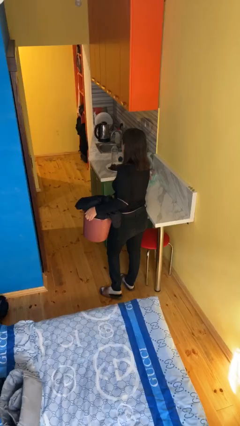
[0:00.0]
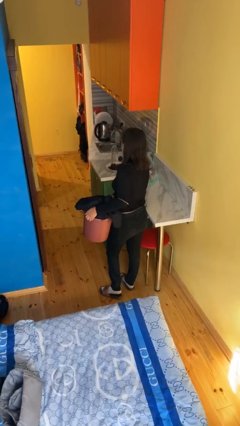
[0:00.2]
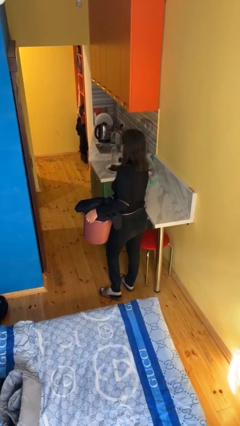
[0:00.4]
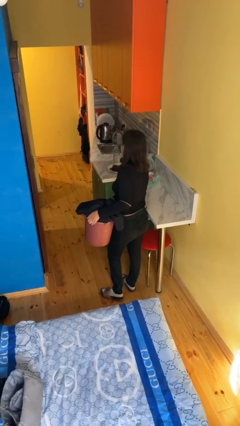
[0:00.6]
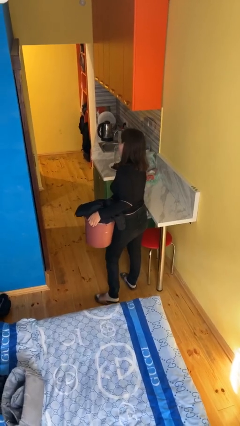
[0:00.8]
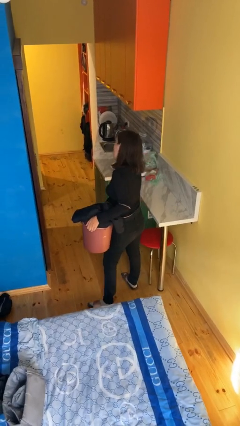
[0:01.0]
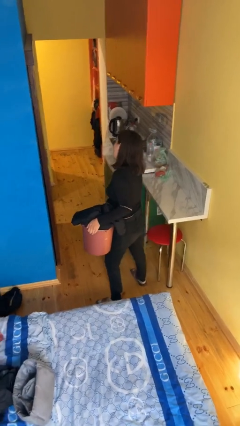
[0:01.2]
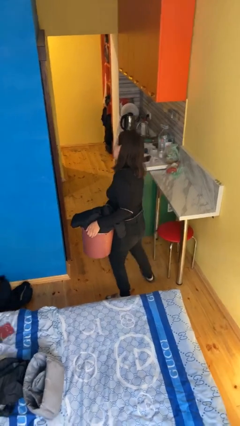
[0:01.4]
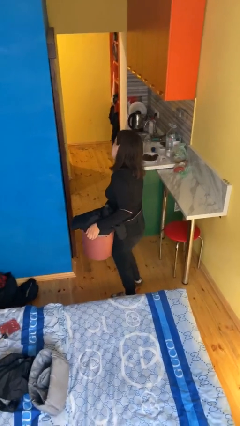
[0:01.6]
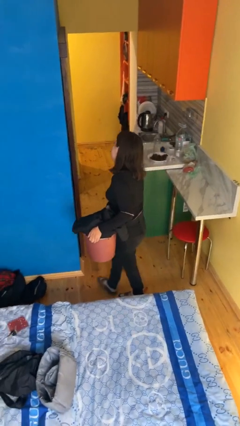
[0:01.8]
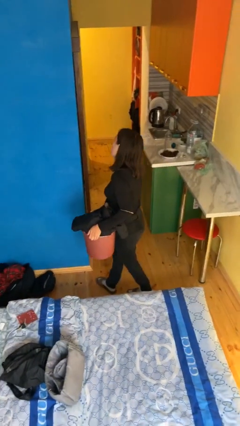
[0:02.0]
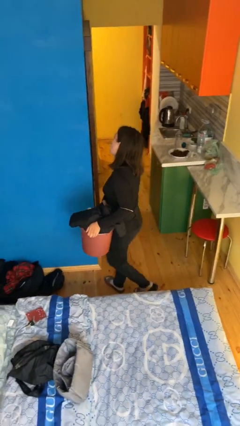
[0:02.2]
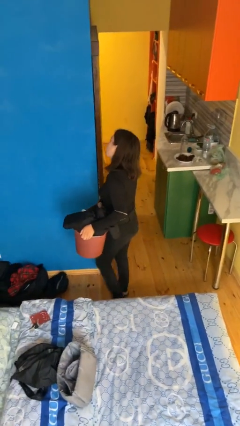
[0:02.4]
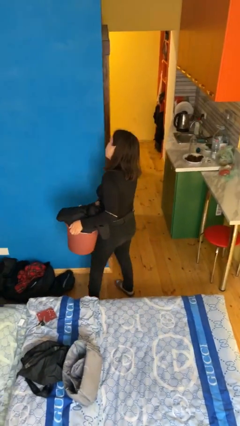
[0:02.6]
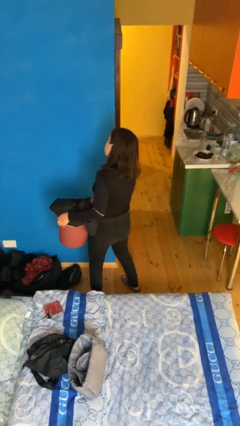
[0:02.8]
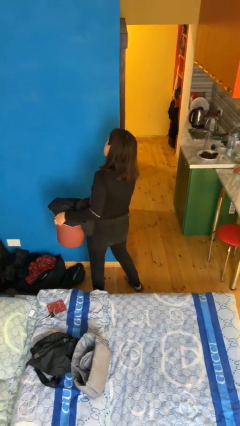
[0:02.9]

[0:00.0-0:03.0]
person carries laundry basket

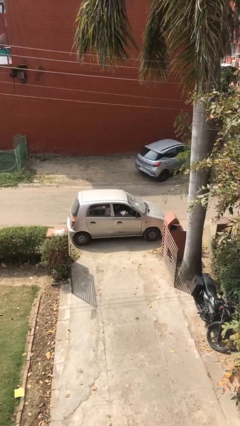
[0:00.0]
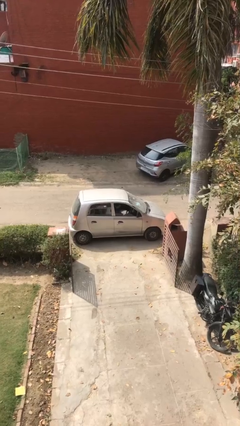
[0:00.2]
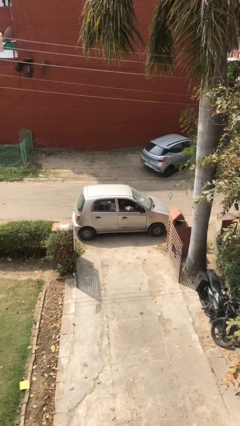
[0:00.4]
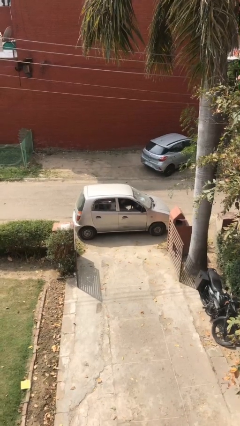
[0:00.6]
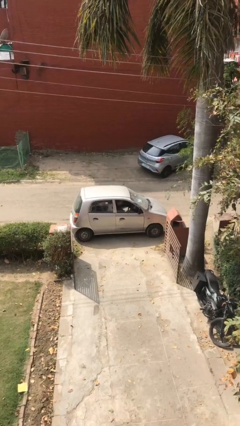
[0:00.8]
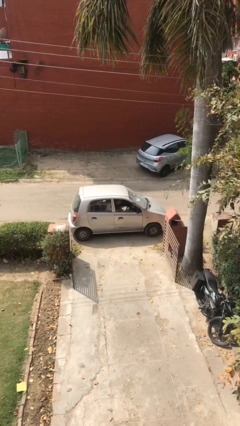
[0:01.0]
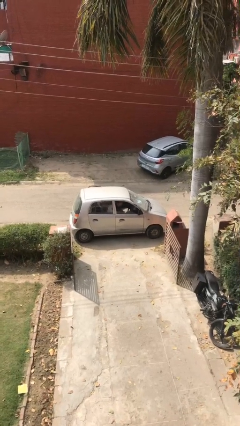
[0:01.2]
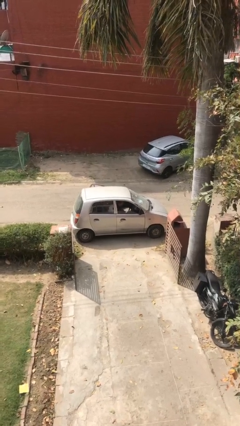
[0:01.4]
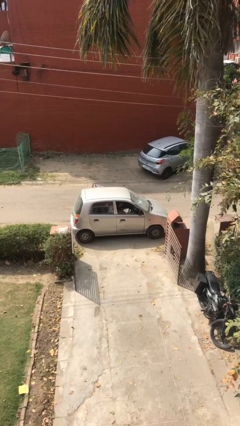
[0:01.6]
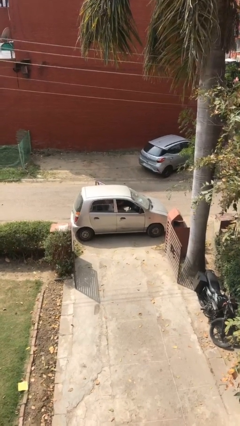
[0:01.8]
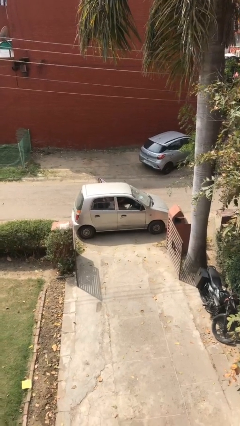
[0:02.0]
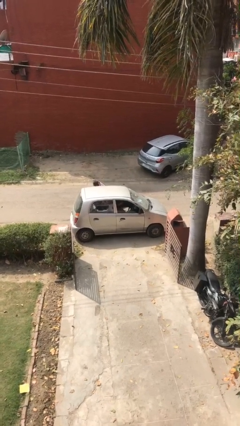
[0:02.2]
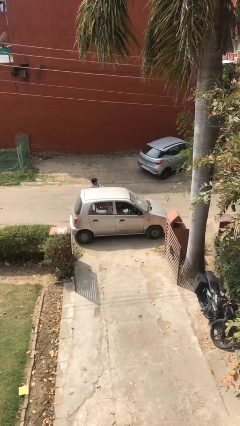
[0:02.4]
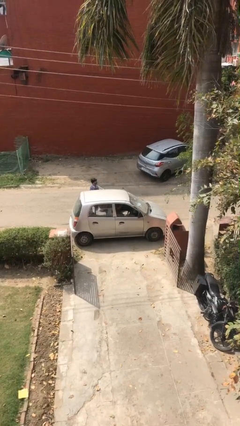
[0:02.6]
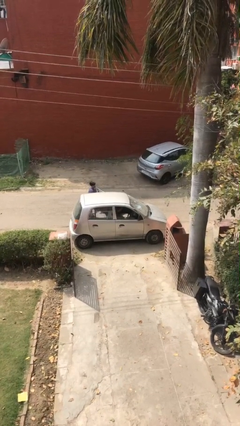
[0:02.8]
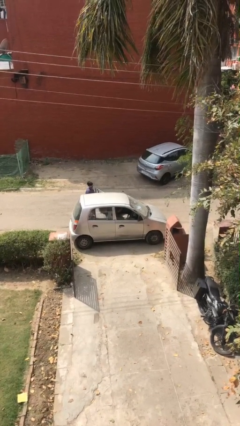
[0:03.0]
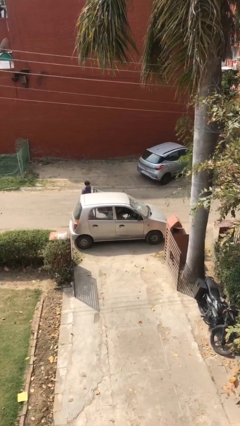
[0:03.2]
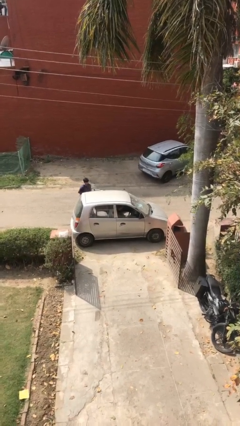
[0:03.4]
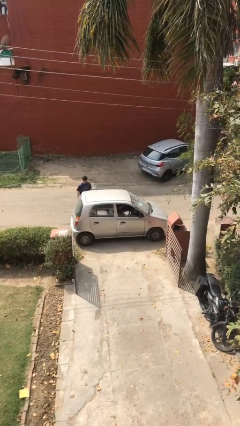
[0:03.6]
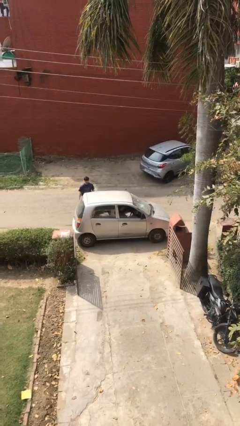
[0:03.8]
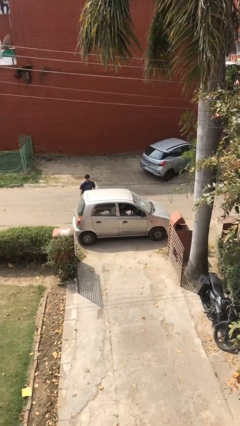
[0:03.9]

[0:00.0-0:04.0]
car drops off person

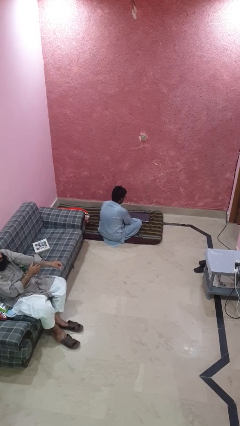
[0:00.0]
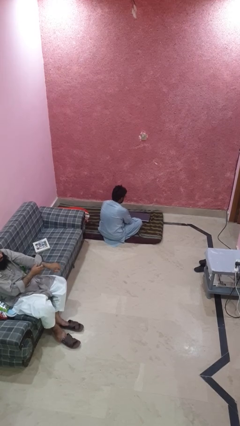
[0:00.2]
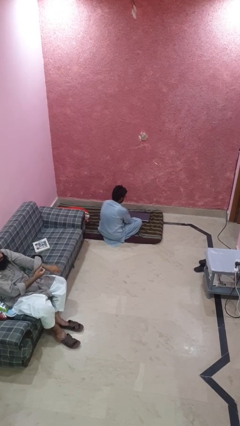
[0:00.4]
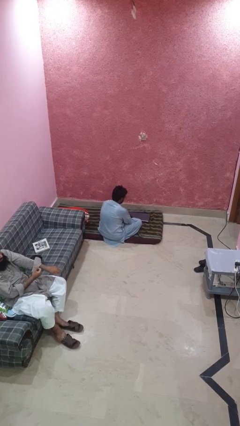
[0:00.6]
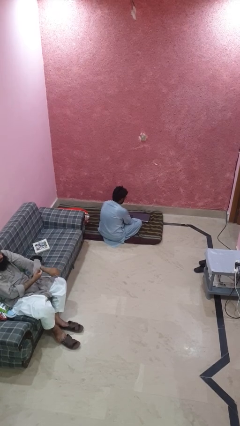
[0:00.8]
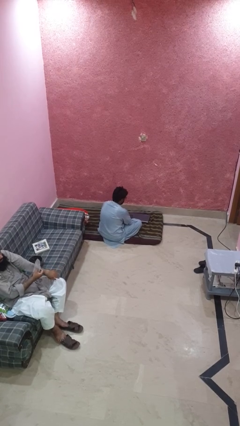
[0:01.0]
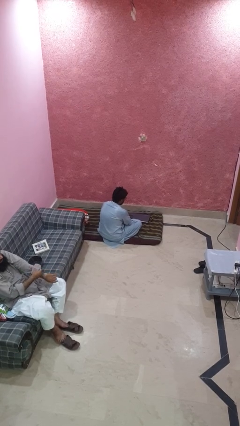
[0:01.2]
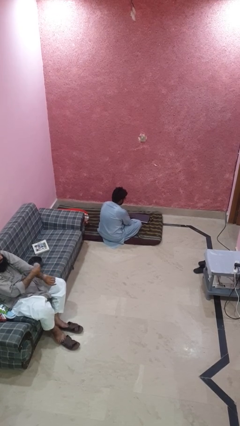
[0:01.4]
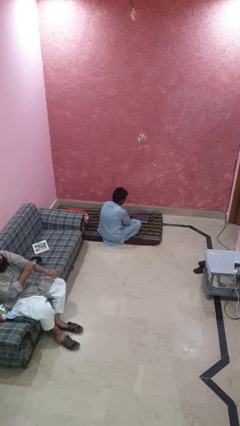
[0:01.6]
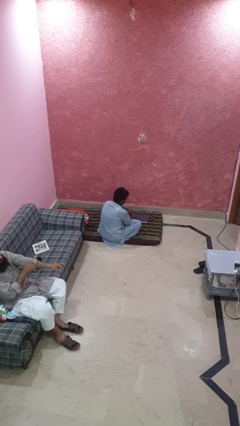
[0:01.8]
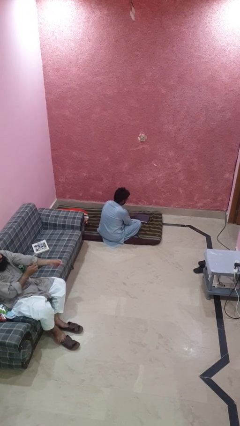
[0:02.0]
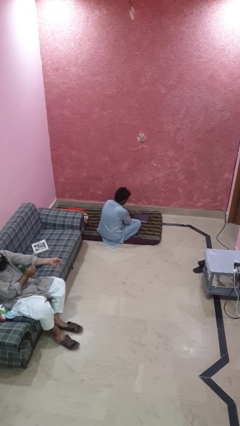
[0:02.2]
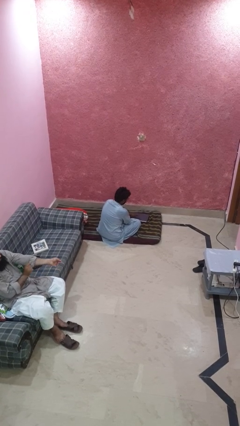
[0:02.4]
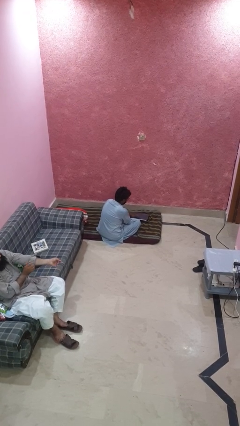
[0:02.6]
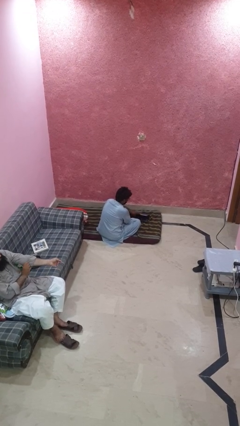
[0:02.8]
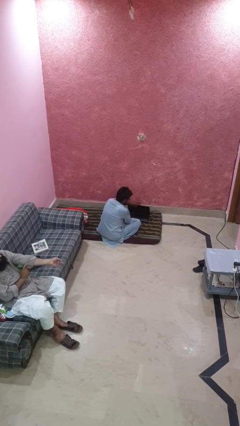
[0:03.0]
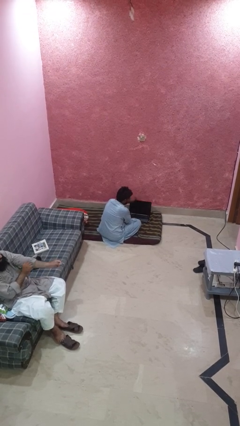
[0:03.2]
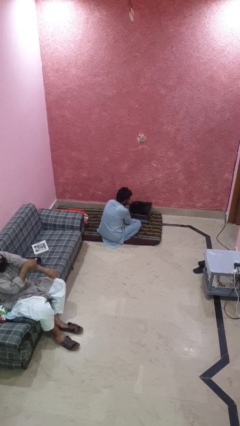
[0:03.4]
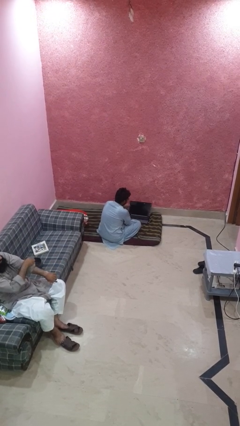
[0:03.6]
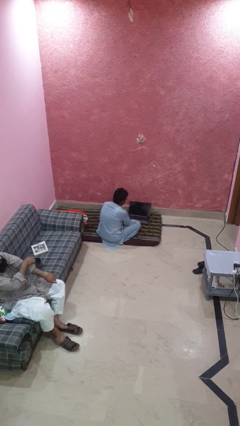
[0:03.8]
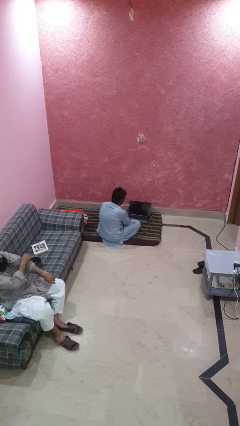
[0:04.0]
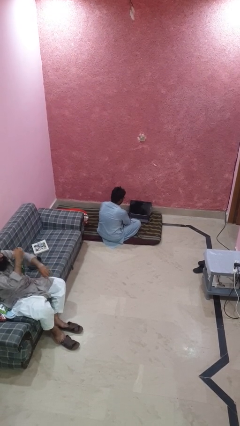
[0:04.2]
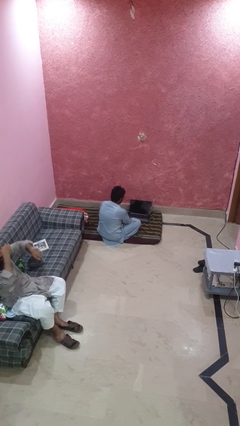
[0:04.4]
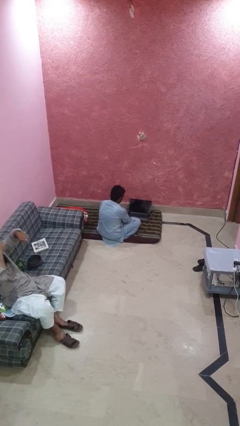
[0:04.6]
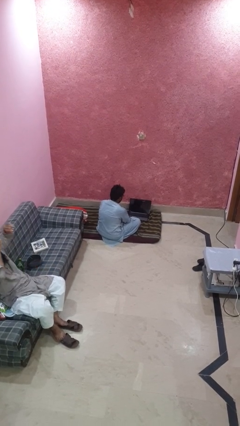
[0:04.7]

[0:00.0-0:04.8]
person opens laptop

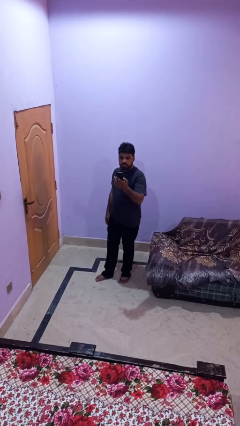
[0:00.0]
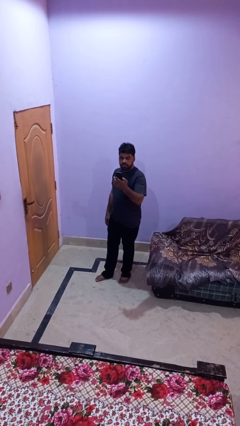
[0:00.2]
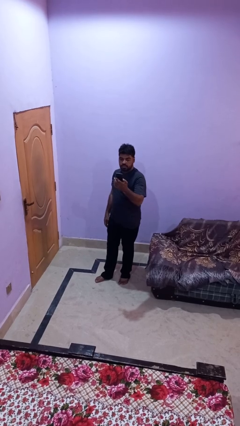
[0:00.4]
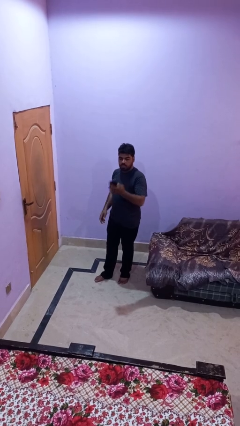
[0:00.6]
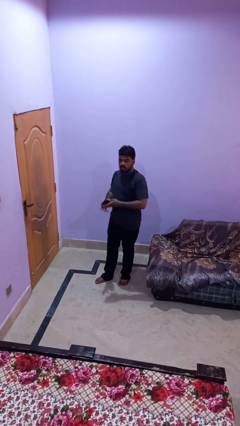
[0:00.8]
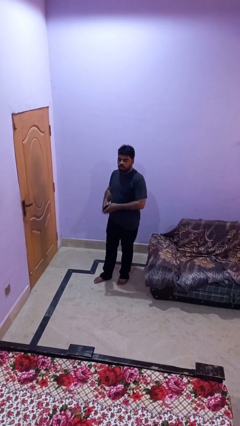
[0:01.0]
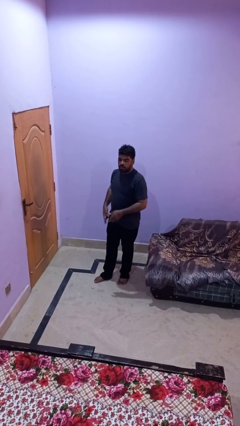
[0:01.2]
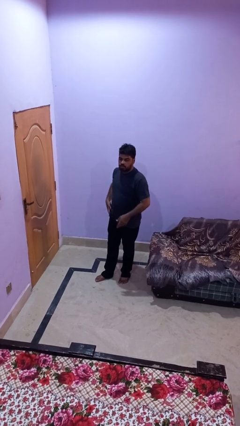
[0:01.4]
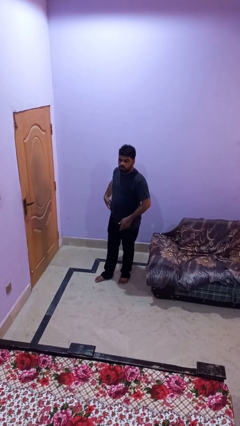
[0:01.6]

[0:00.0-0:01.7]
person puts phone into pocket

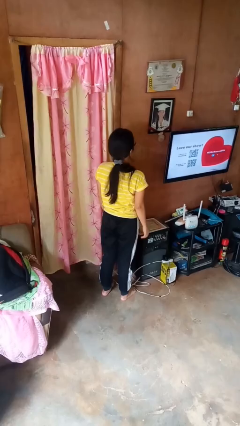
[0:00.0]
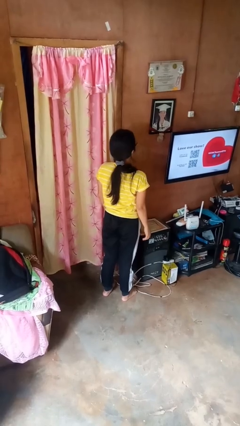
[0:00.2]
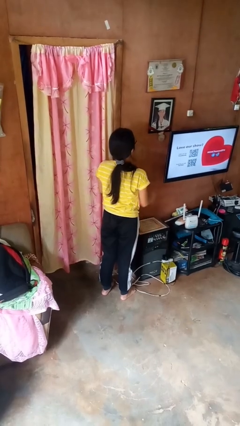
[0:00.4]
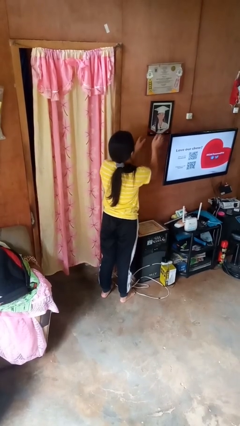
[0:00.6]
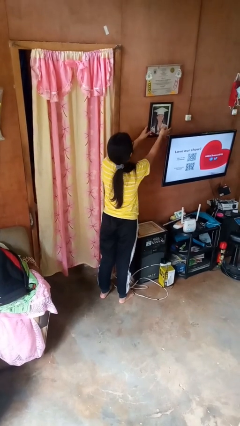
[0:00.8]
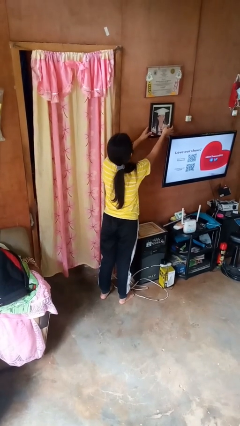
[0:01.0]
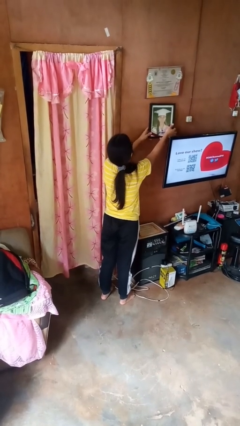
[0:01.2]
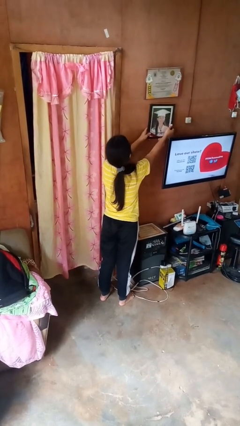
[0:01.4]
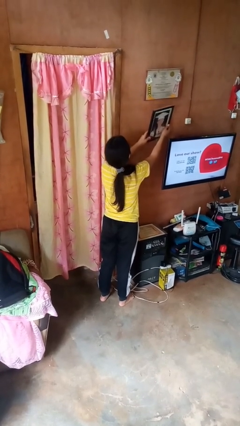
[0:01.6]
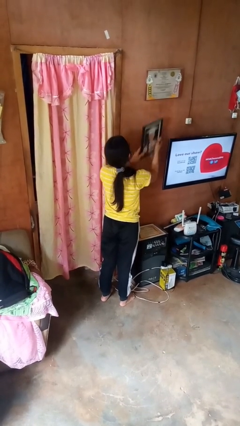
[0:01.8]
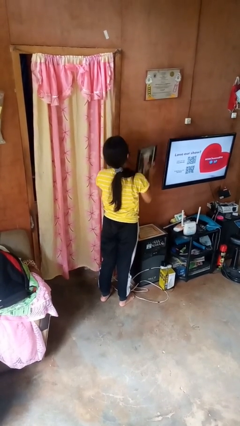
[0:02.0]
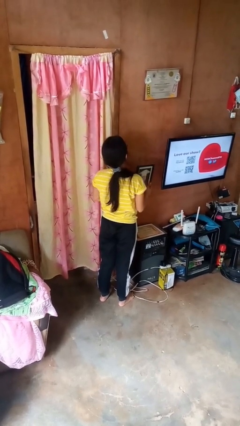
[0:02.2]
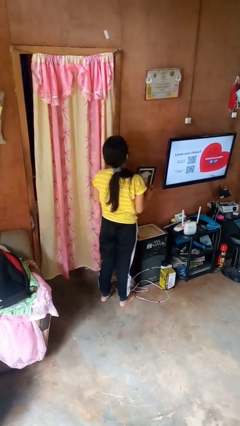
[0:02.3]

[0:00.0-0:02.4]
person takes down picture frame

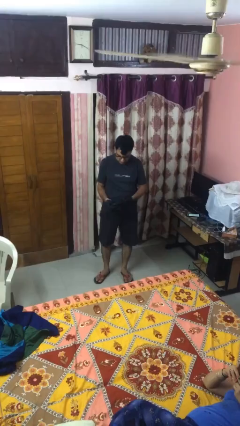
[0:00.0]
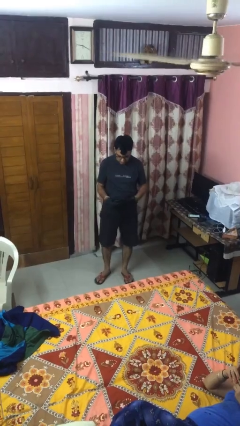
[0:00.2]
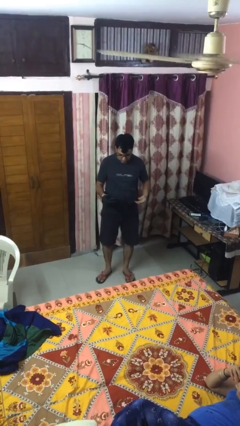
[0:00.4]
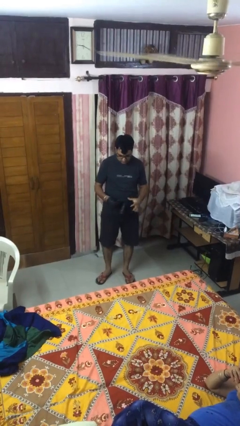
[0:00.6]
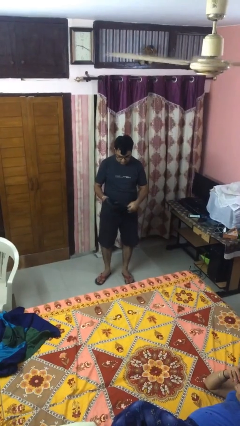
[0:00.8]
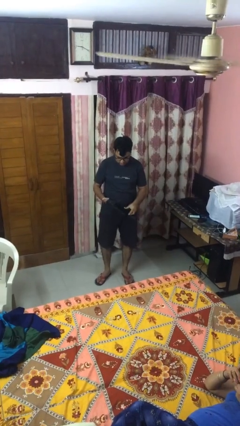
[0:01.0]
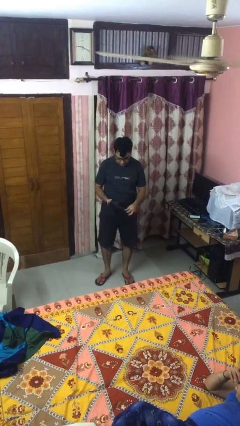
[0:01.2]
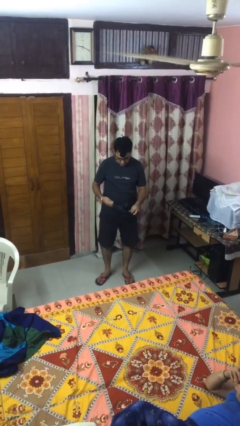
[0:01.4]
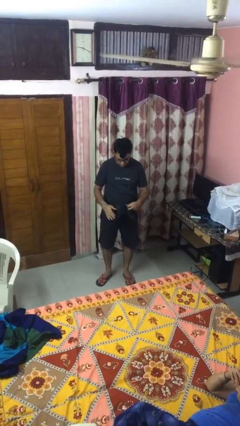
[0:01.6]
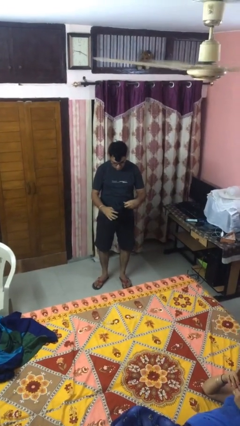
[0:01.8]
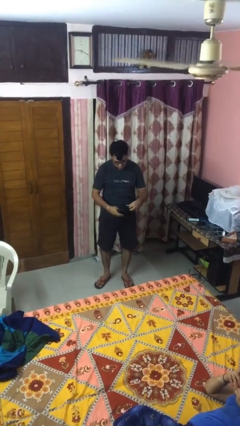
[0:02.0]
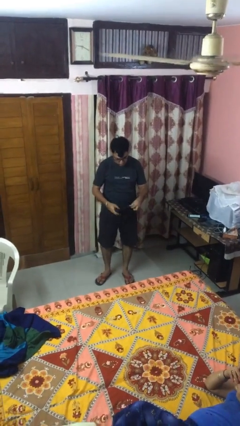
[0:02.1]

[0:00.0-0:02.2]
person takes off gloves
